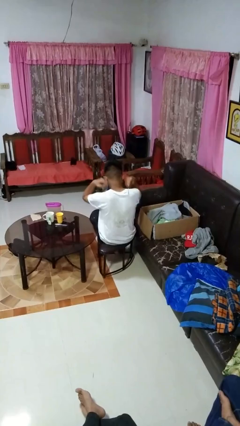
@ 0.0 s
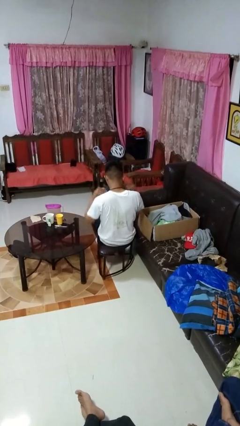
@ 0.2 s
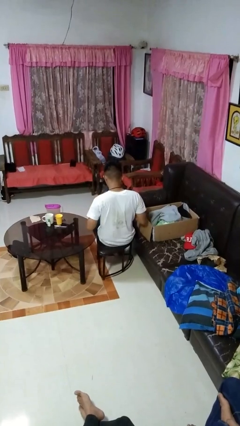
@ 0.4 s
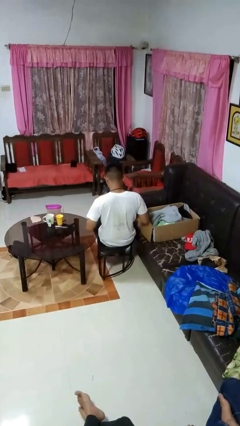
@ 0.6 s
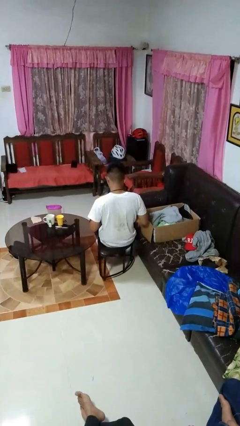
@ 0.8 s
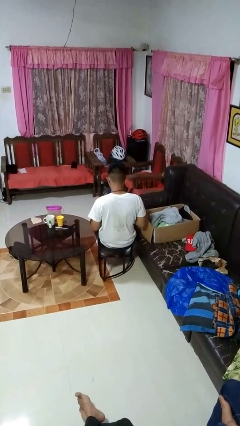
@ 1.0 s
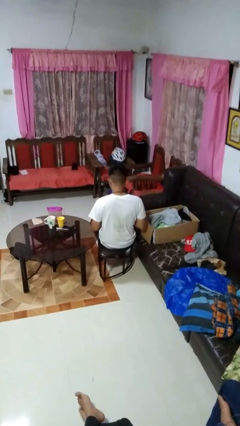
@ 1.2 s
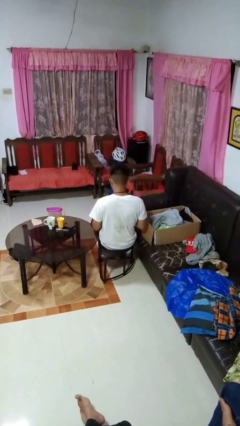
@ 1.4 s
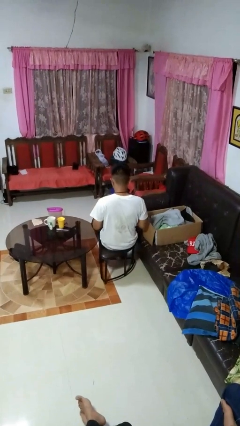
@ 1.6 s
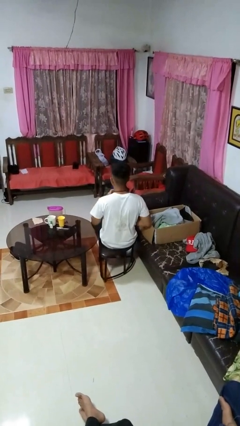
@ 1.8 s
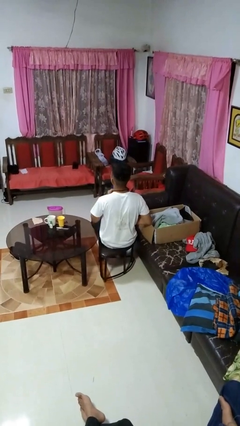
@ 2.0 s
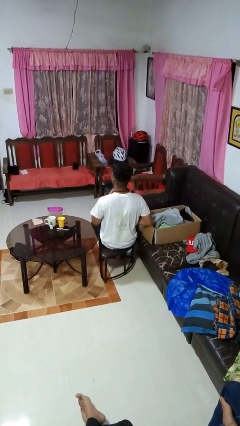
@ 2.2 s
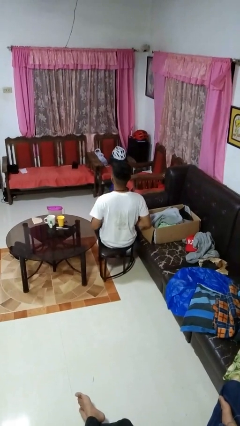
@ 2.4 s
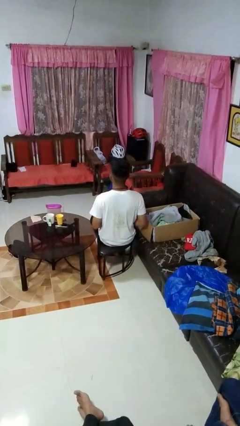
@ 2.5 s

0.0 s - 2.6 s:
person puts on necktie

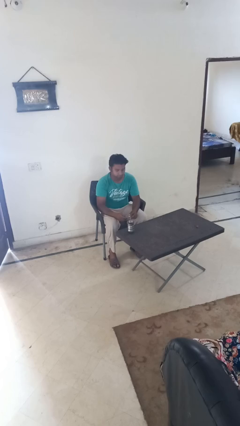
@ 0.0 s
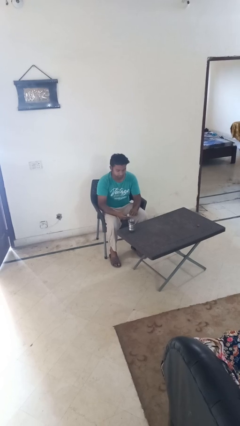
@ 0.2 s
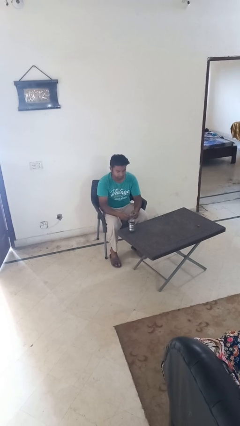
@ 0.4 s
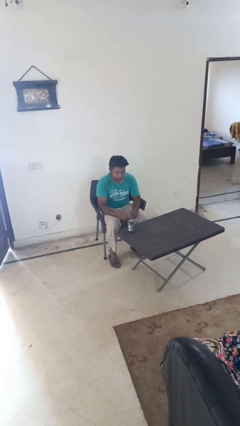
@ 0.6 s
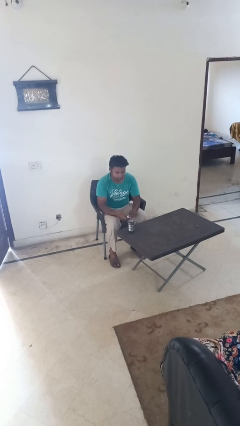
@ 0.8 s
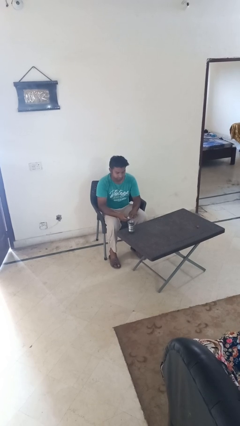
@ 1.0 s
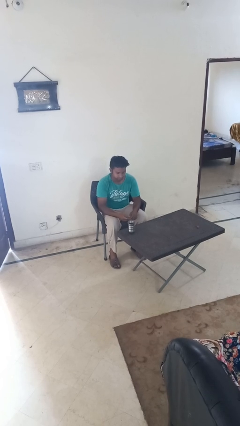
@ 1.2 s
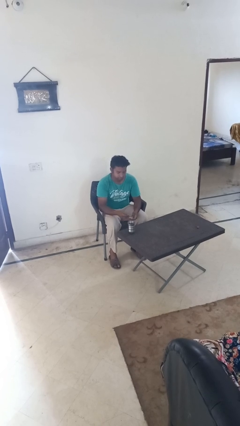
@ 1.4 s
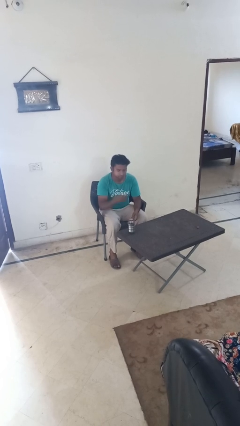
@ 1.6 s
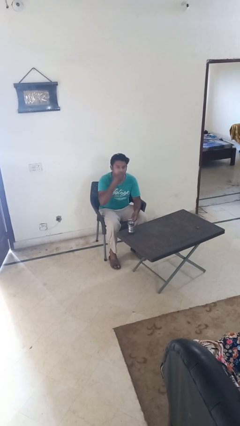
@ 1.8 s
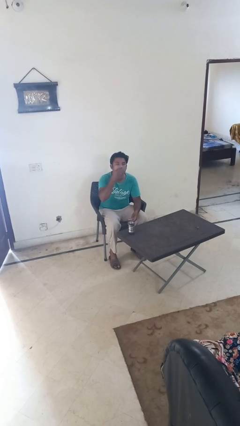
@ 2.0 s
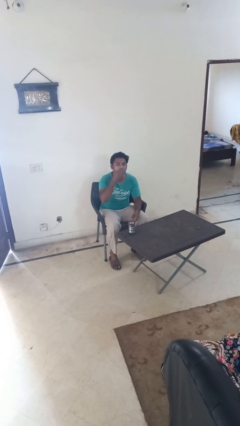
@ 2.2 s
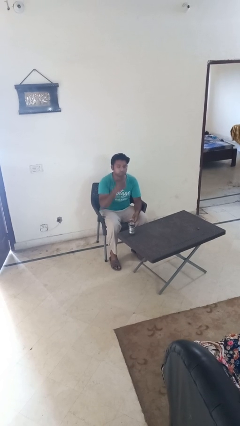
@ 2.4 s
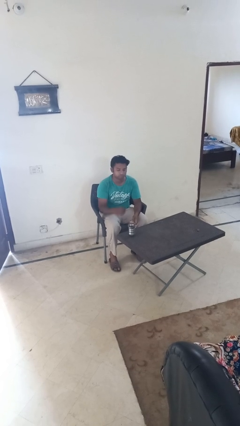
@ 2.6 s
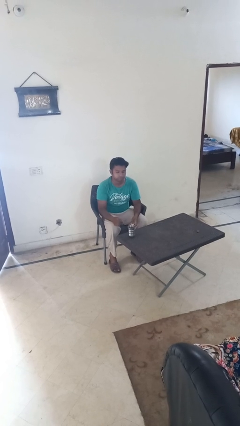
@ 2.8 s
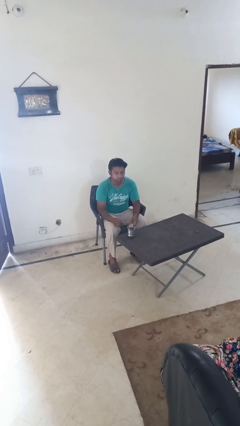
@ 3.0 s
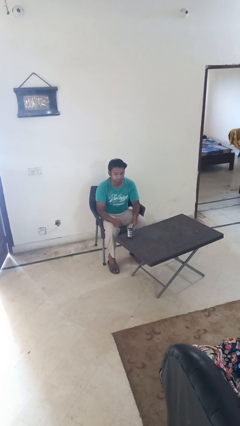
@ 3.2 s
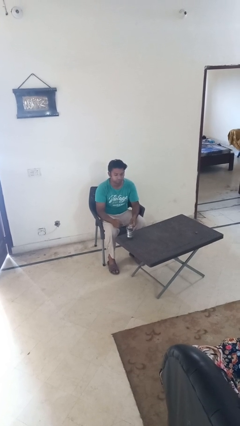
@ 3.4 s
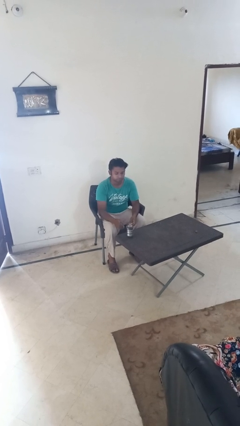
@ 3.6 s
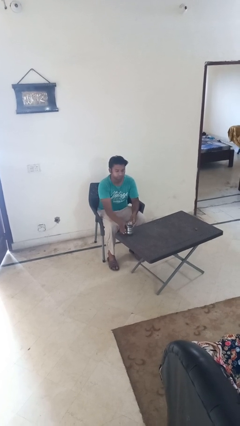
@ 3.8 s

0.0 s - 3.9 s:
person takes medicine pills

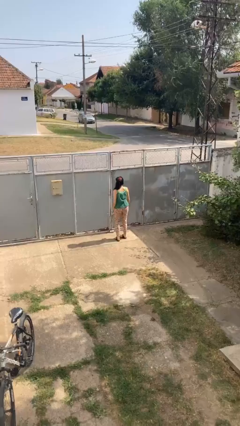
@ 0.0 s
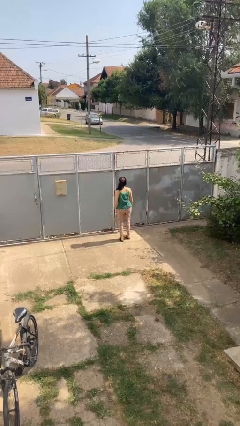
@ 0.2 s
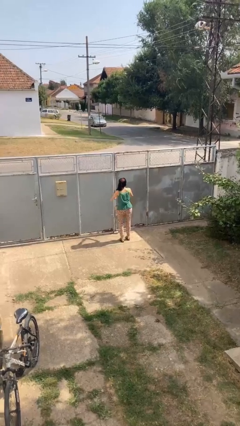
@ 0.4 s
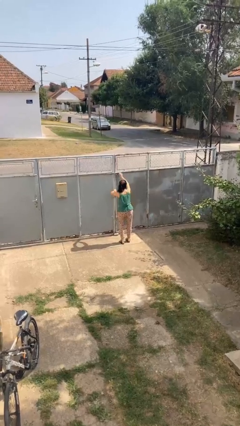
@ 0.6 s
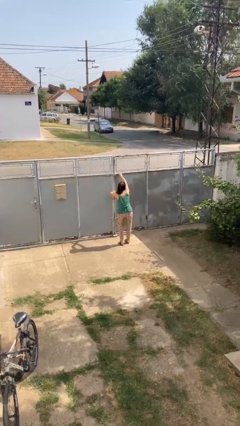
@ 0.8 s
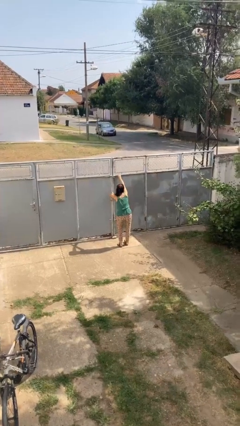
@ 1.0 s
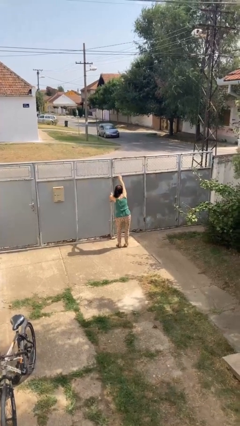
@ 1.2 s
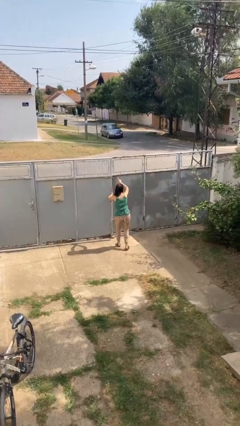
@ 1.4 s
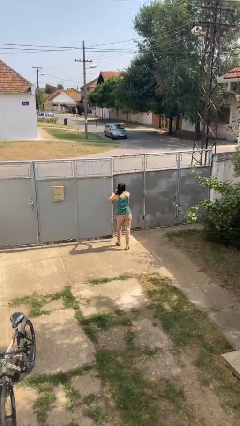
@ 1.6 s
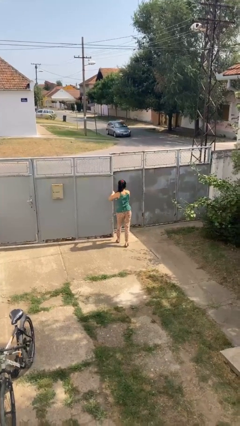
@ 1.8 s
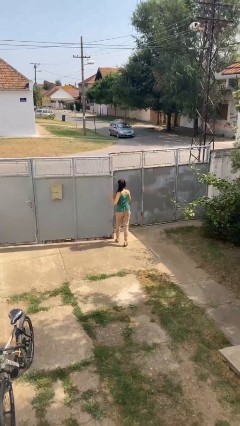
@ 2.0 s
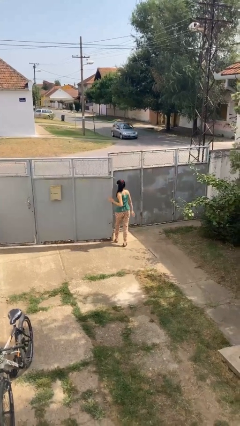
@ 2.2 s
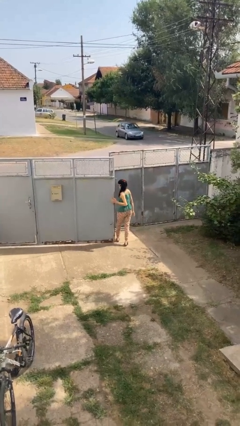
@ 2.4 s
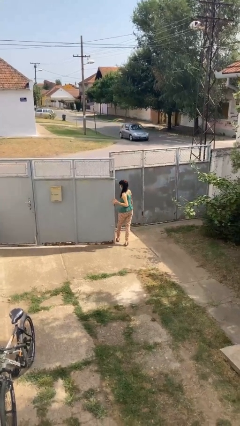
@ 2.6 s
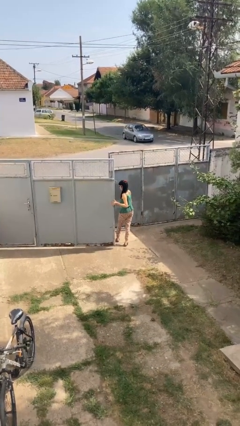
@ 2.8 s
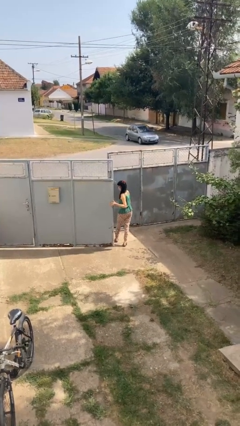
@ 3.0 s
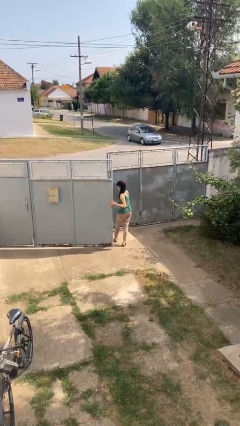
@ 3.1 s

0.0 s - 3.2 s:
person opens gate

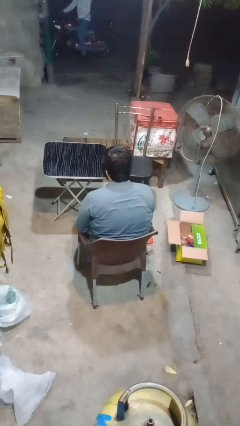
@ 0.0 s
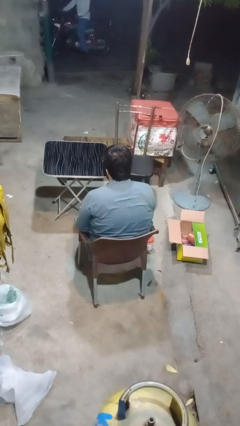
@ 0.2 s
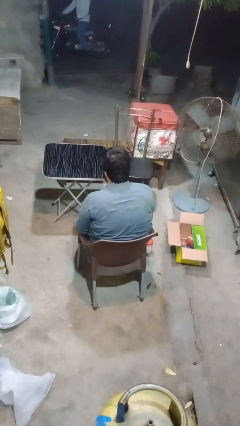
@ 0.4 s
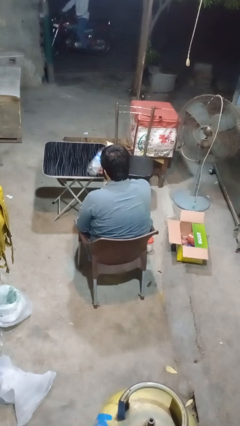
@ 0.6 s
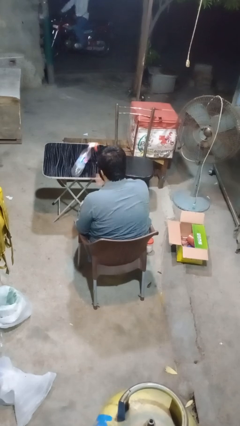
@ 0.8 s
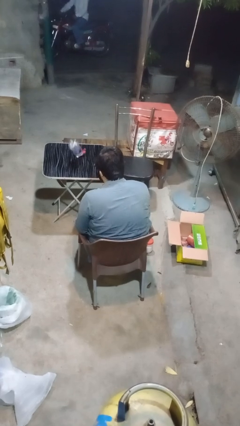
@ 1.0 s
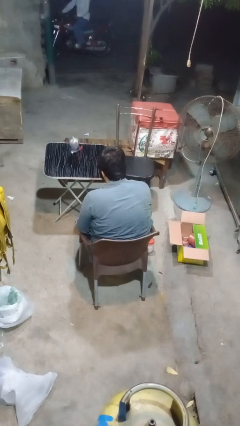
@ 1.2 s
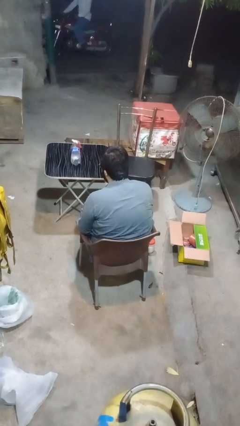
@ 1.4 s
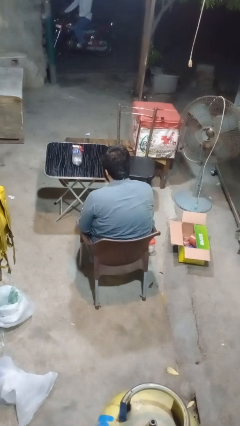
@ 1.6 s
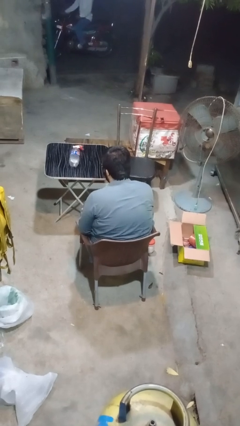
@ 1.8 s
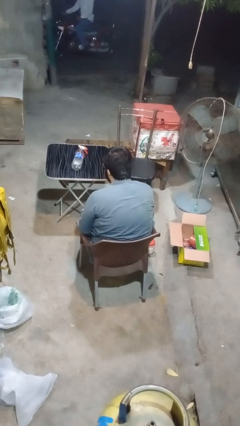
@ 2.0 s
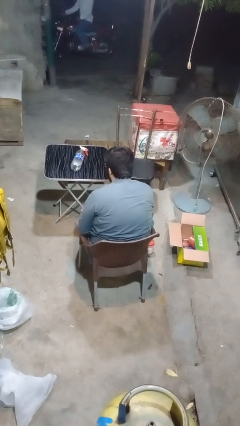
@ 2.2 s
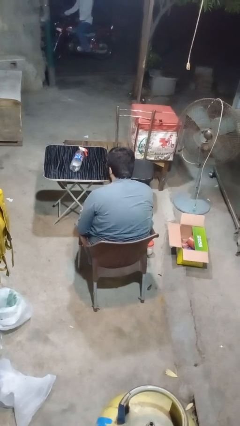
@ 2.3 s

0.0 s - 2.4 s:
person throws object on table

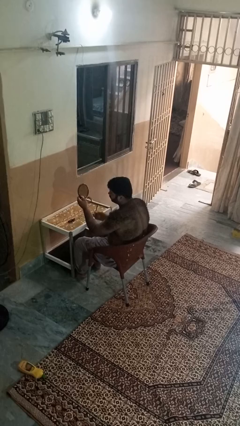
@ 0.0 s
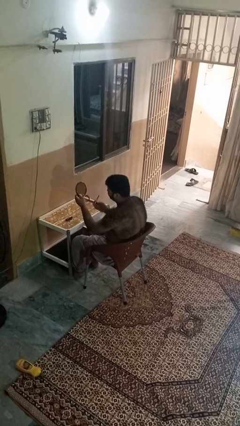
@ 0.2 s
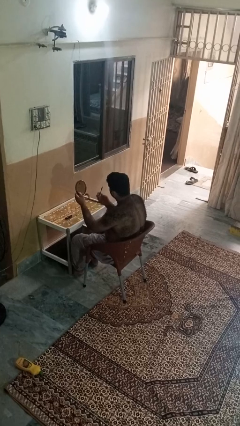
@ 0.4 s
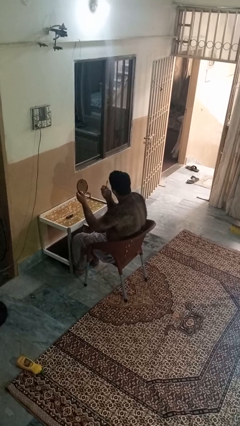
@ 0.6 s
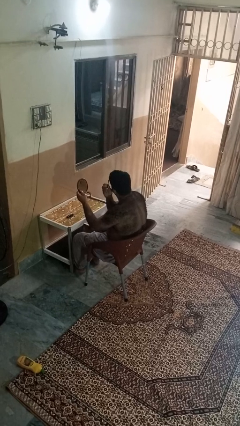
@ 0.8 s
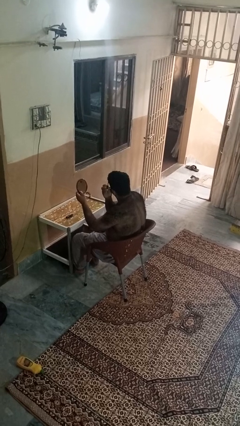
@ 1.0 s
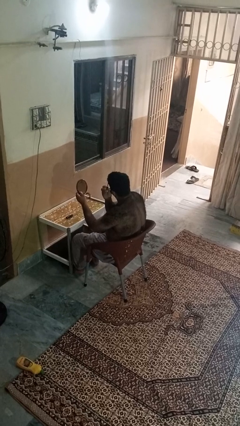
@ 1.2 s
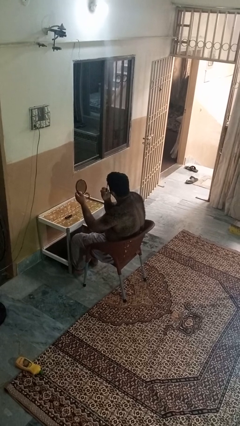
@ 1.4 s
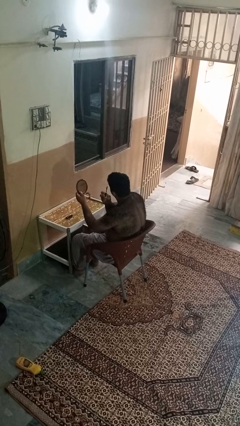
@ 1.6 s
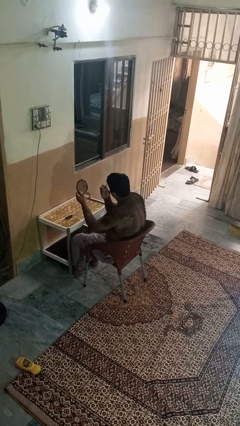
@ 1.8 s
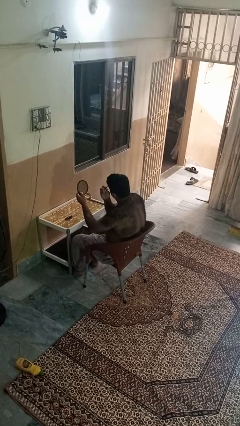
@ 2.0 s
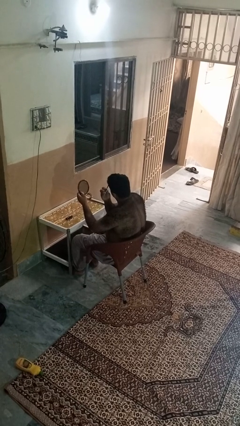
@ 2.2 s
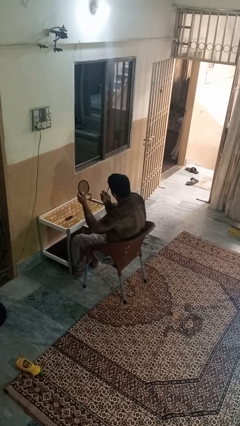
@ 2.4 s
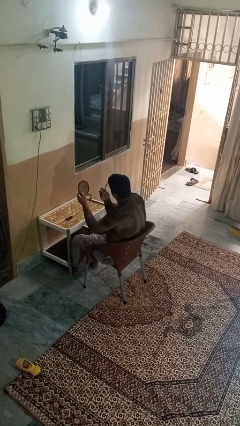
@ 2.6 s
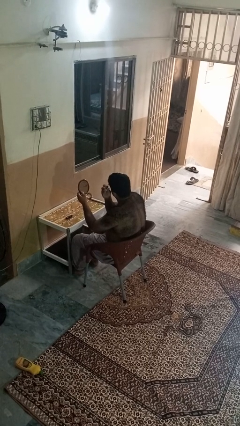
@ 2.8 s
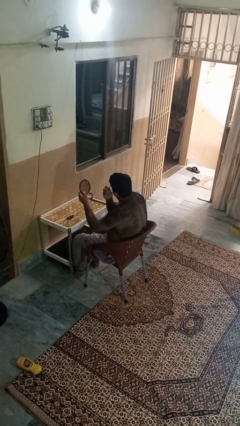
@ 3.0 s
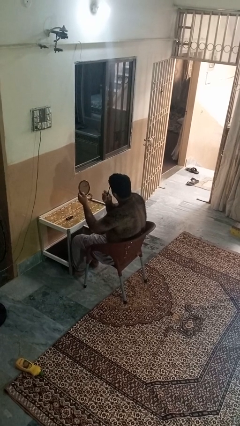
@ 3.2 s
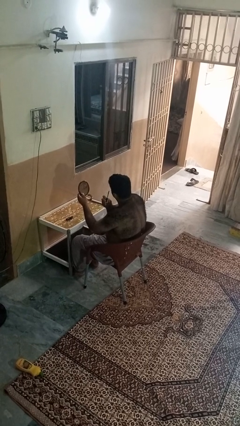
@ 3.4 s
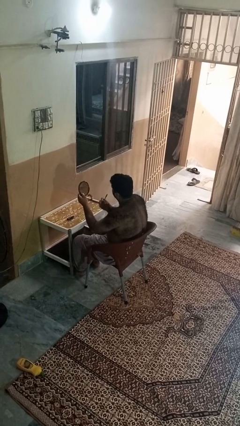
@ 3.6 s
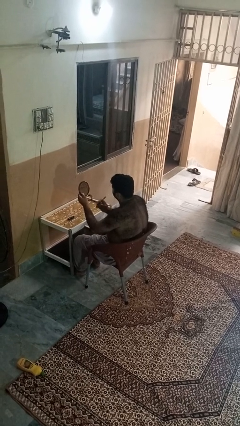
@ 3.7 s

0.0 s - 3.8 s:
person applies eye makeup

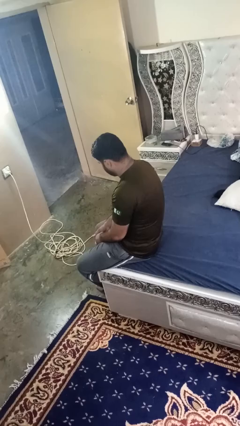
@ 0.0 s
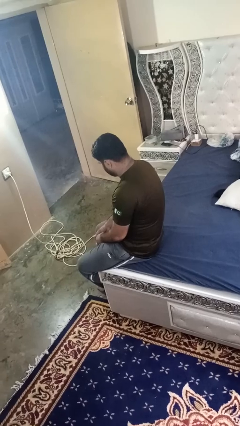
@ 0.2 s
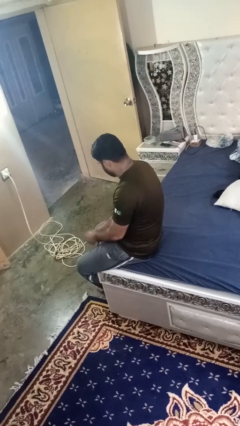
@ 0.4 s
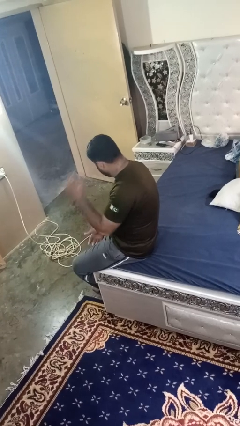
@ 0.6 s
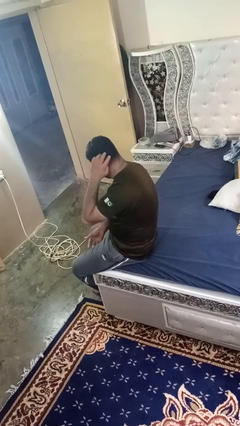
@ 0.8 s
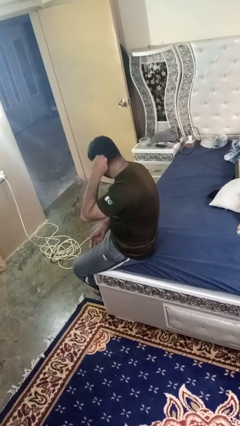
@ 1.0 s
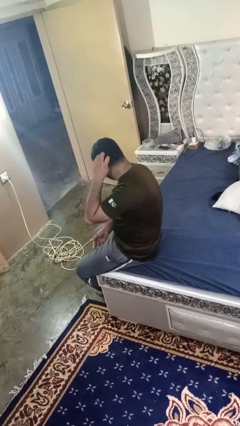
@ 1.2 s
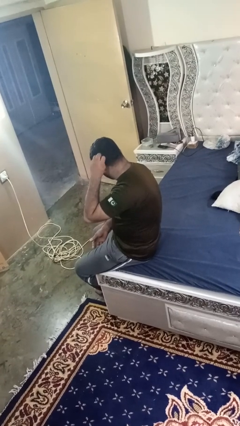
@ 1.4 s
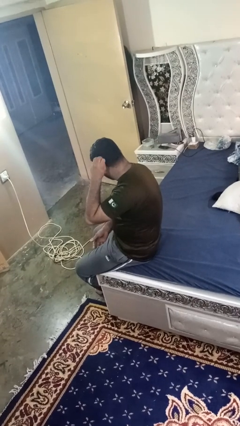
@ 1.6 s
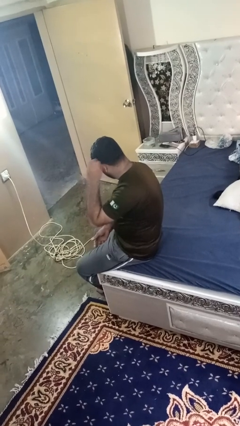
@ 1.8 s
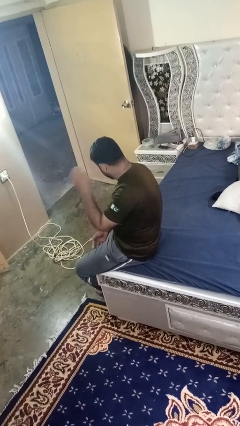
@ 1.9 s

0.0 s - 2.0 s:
person strokes hair
